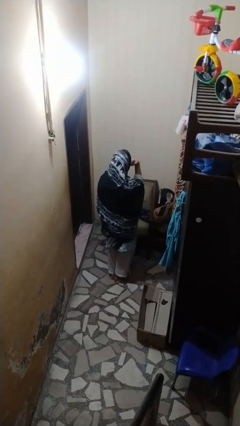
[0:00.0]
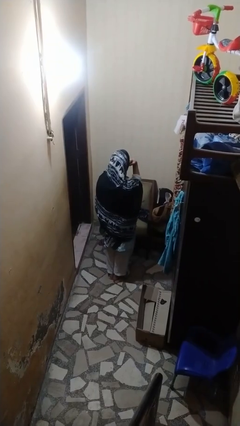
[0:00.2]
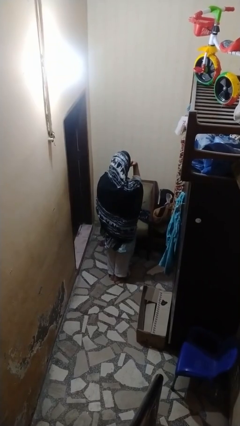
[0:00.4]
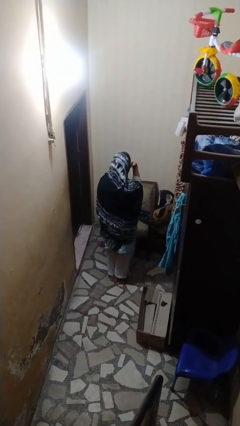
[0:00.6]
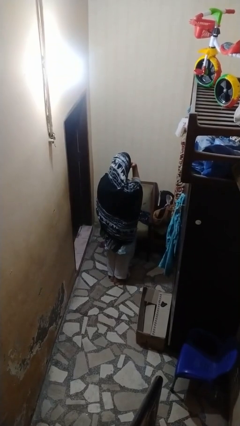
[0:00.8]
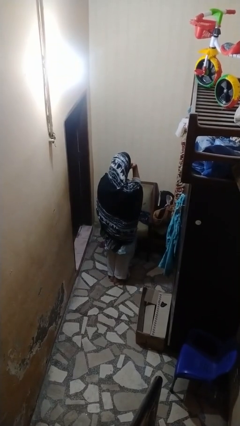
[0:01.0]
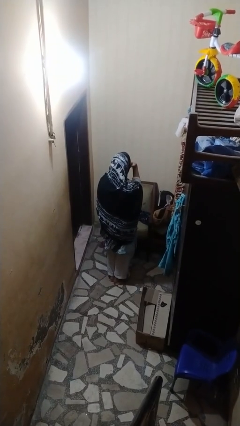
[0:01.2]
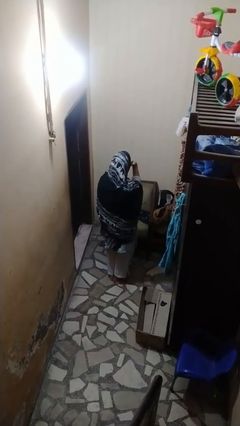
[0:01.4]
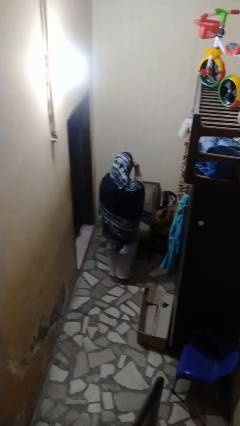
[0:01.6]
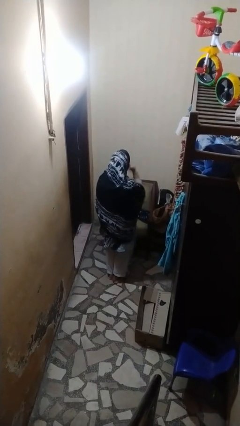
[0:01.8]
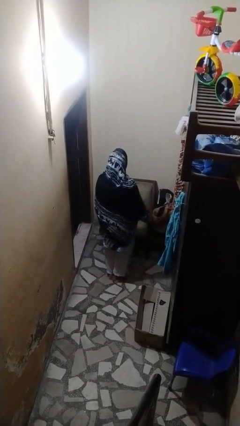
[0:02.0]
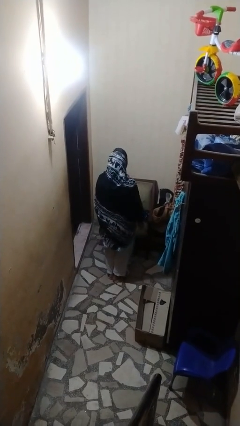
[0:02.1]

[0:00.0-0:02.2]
person gestures watch closely

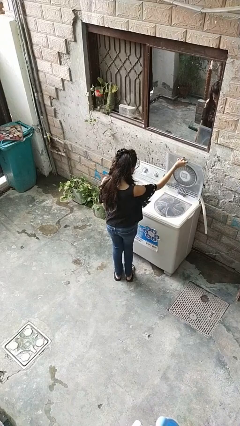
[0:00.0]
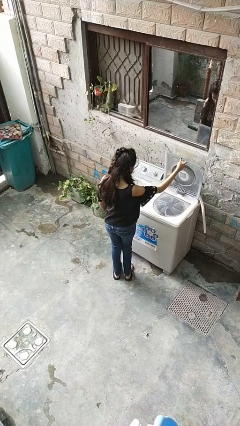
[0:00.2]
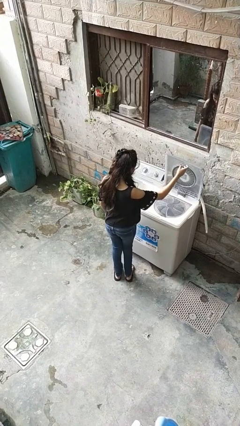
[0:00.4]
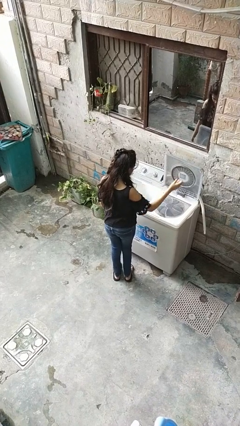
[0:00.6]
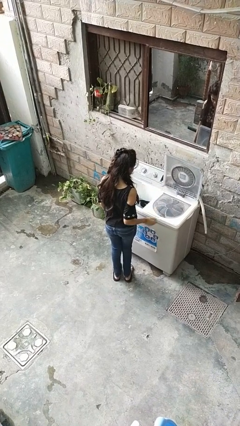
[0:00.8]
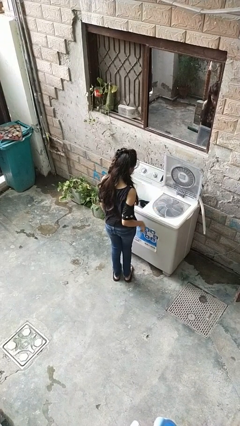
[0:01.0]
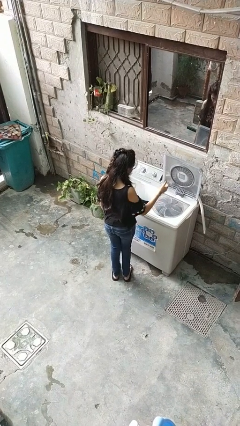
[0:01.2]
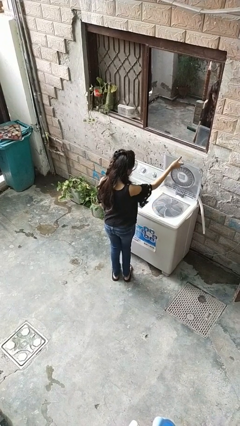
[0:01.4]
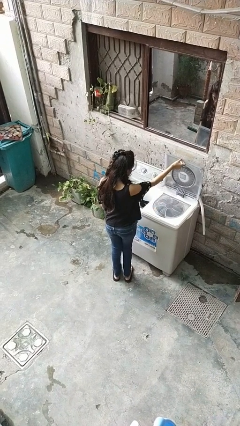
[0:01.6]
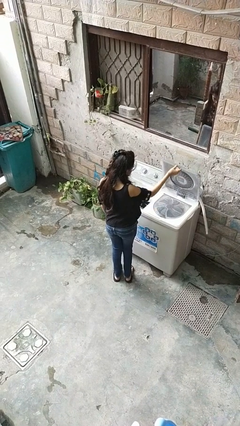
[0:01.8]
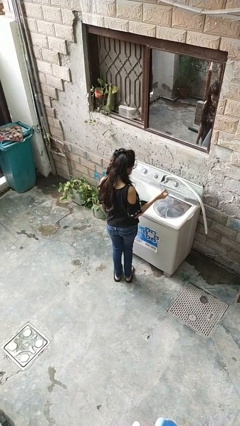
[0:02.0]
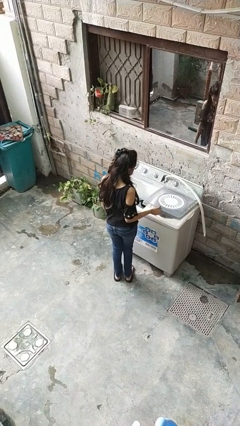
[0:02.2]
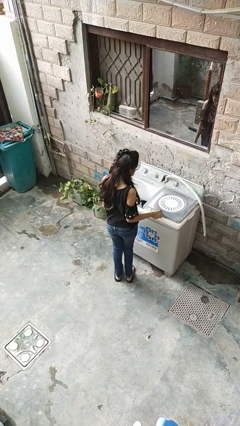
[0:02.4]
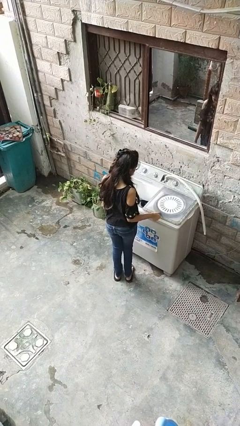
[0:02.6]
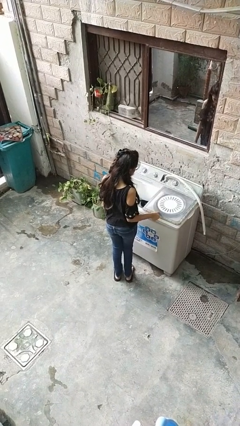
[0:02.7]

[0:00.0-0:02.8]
person closes clothes washer

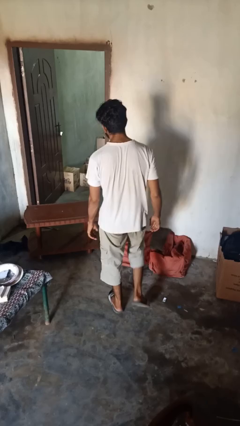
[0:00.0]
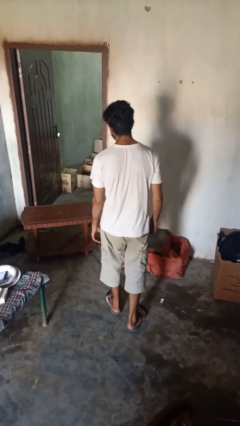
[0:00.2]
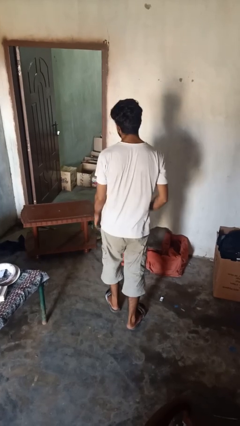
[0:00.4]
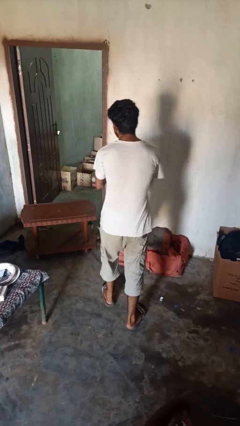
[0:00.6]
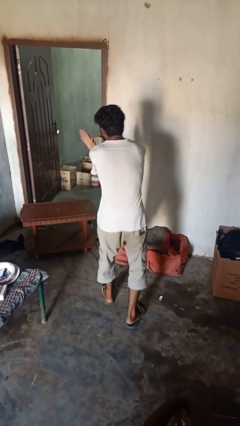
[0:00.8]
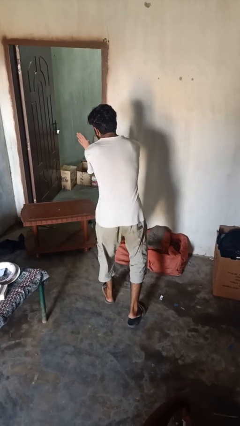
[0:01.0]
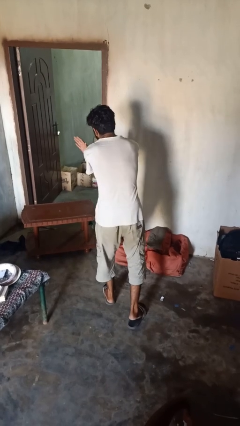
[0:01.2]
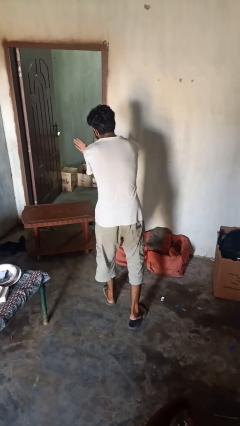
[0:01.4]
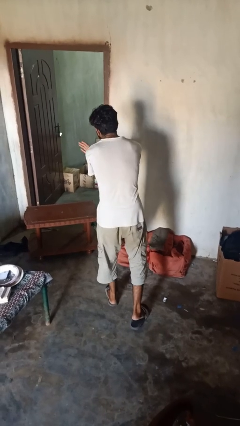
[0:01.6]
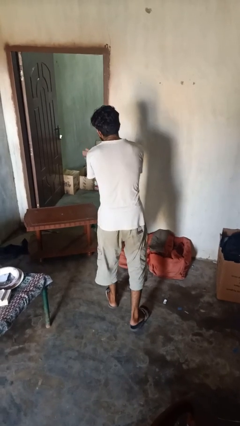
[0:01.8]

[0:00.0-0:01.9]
person karate chop

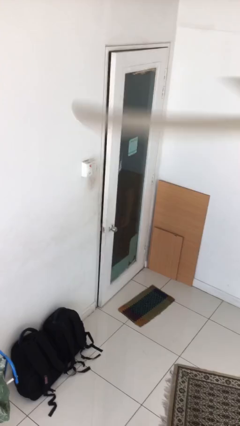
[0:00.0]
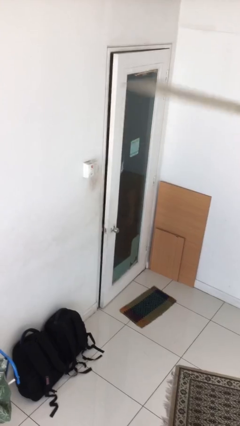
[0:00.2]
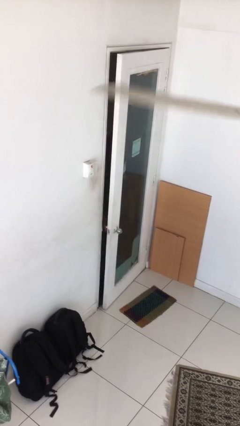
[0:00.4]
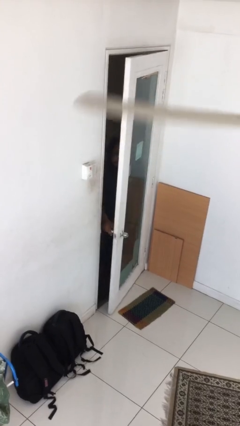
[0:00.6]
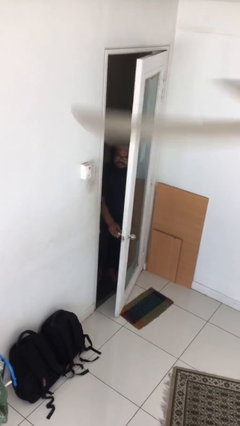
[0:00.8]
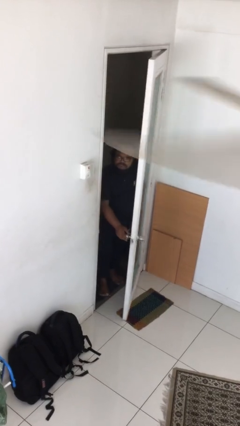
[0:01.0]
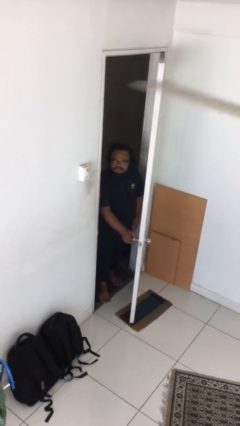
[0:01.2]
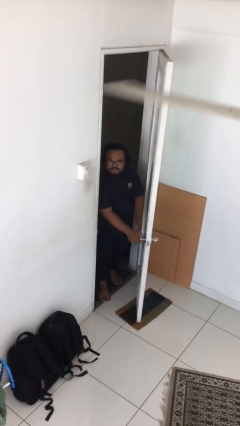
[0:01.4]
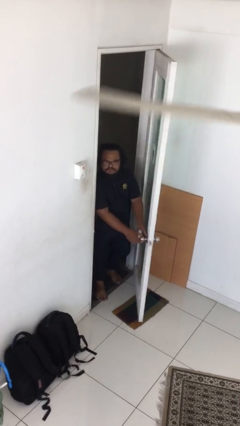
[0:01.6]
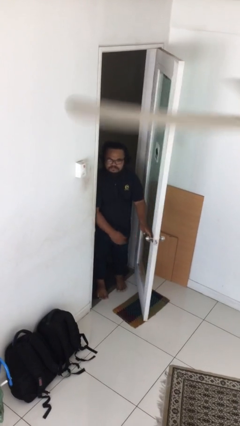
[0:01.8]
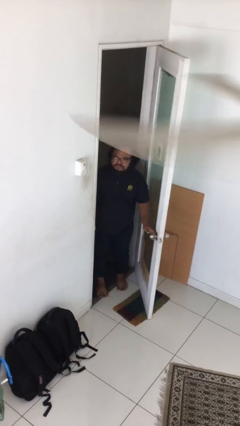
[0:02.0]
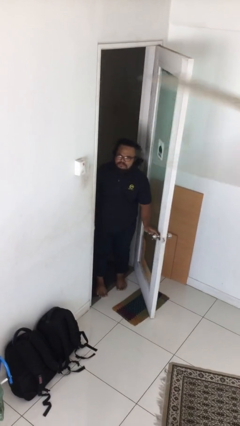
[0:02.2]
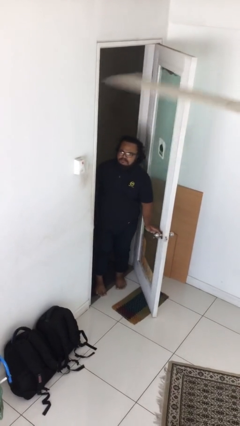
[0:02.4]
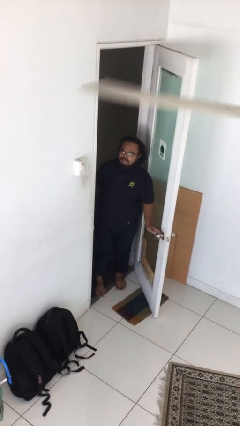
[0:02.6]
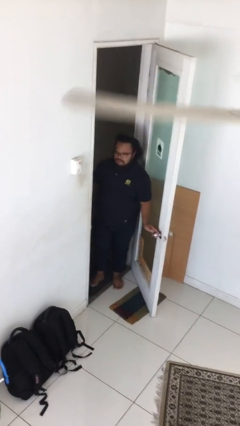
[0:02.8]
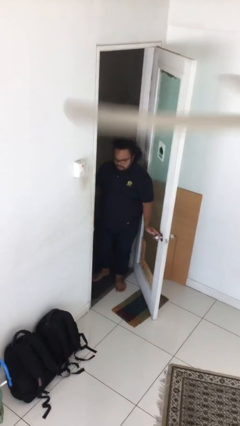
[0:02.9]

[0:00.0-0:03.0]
person opens facility door

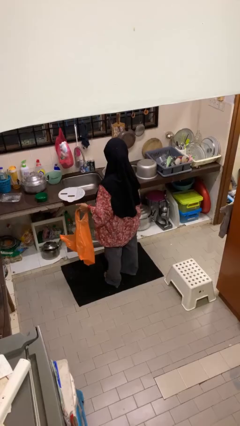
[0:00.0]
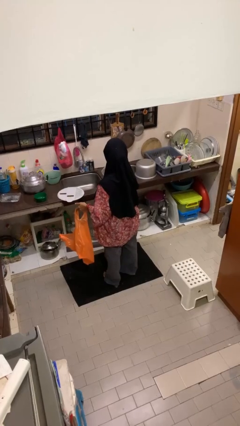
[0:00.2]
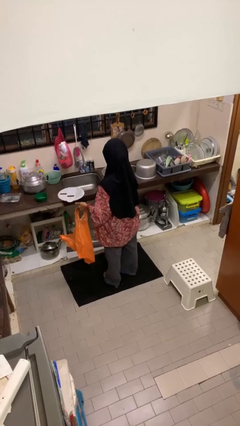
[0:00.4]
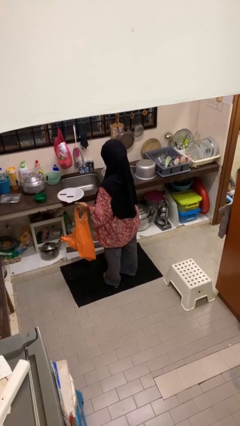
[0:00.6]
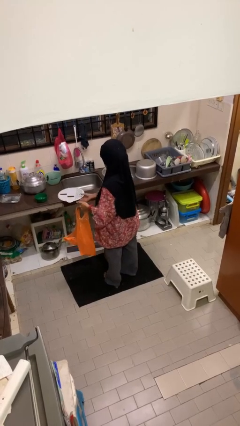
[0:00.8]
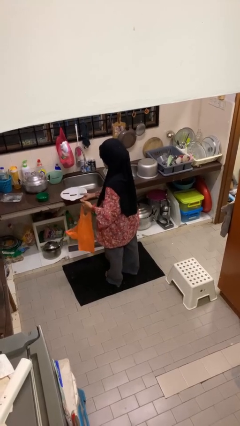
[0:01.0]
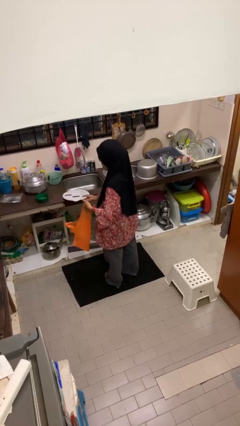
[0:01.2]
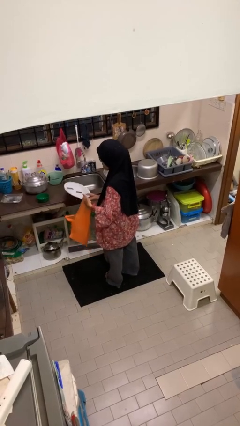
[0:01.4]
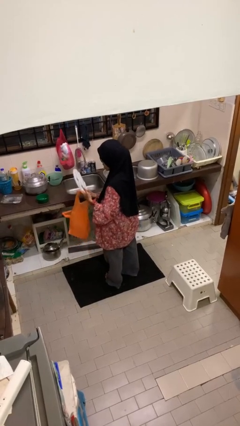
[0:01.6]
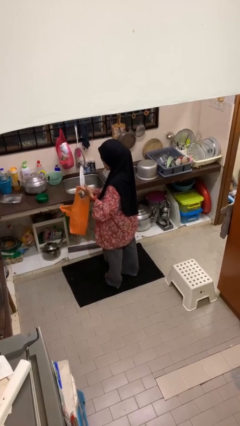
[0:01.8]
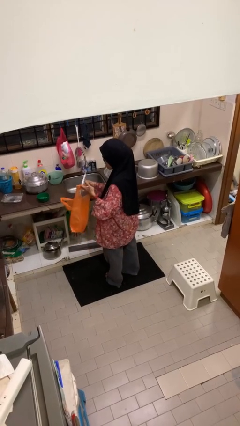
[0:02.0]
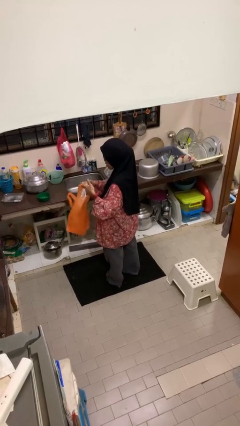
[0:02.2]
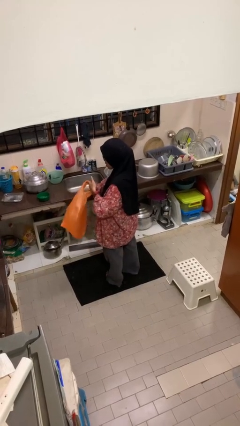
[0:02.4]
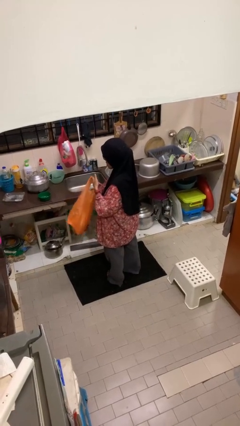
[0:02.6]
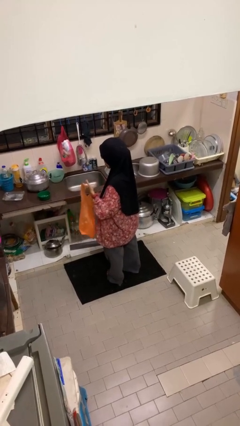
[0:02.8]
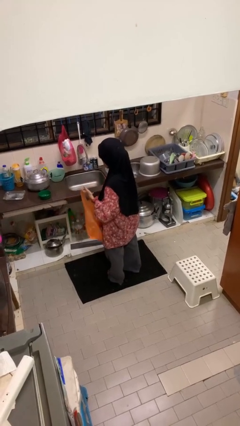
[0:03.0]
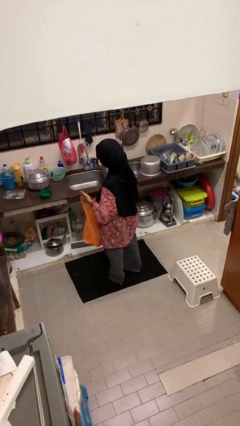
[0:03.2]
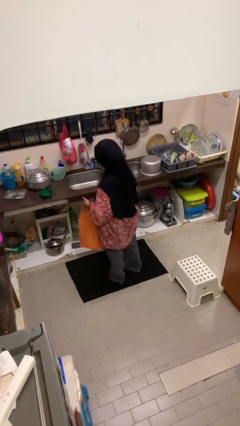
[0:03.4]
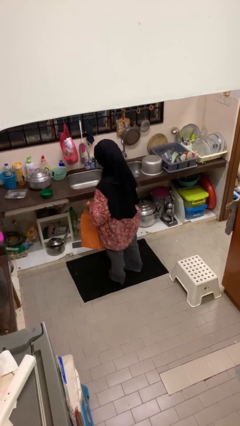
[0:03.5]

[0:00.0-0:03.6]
person puts object into bag

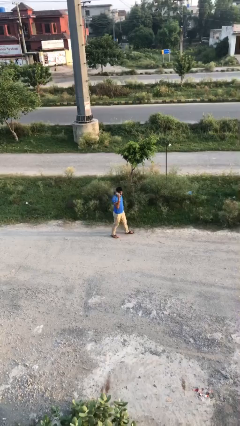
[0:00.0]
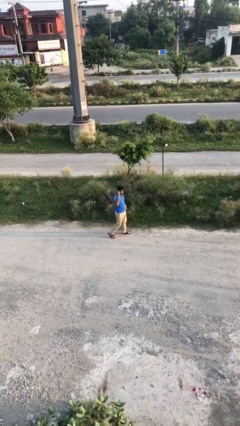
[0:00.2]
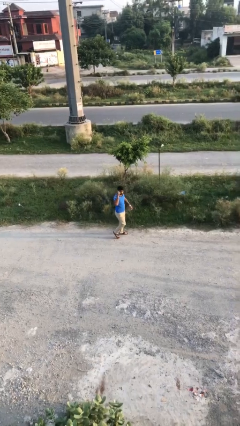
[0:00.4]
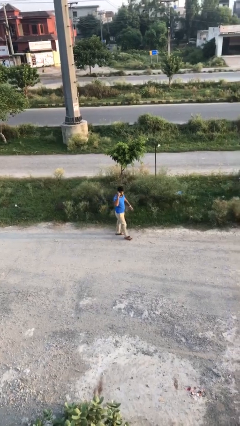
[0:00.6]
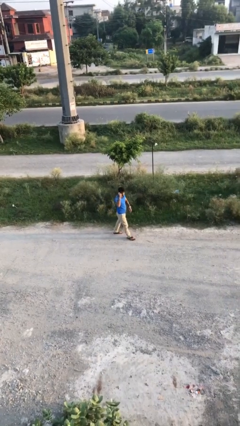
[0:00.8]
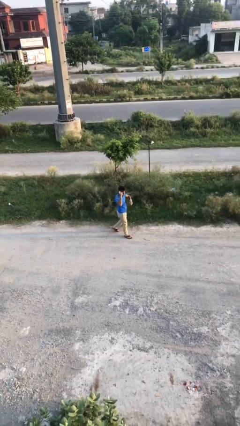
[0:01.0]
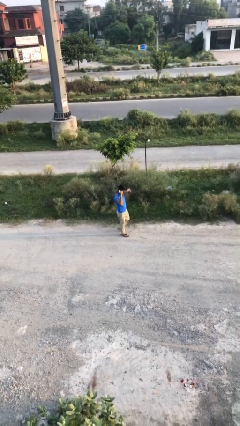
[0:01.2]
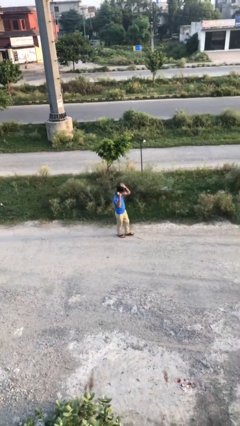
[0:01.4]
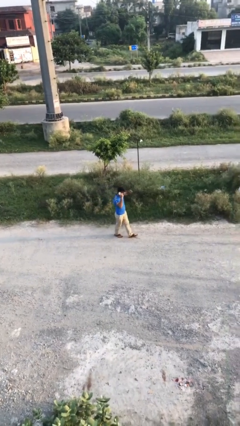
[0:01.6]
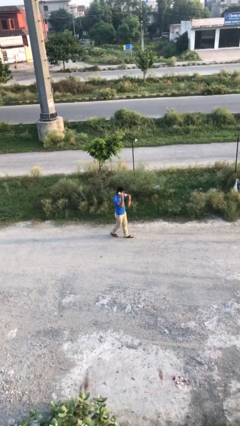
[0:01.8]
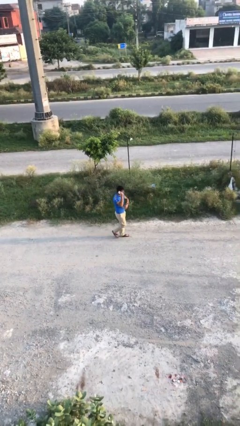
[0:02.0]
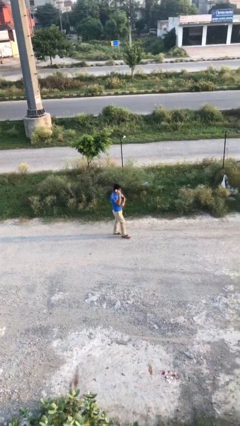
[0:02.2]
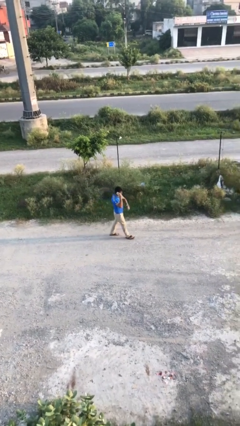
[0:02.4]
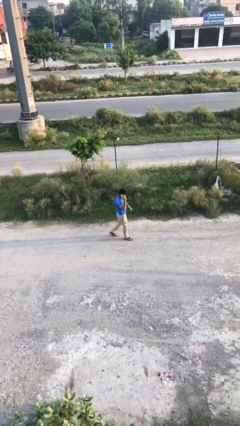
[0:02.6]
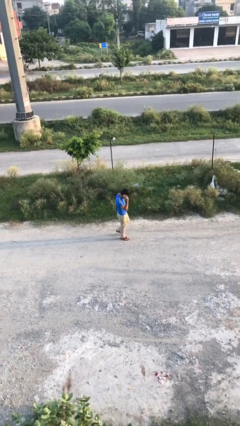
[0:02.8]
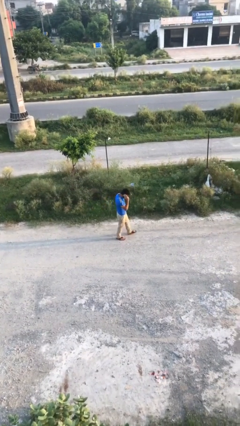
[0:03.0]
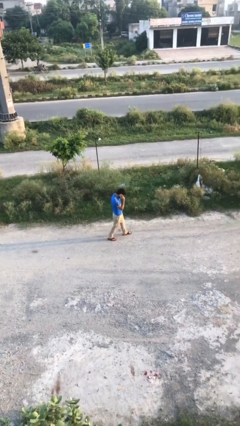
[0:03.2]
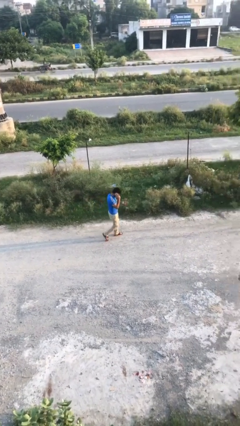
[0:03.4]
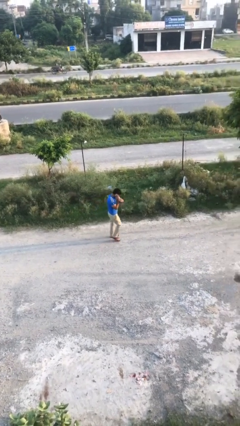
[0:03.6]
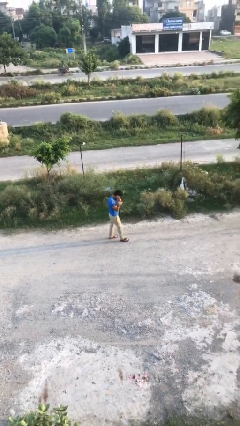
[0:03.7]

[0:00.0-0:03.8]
person talks on phone
